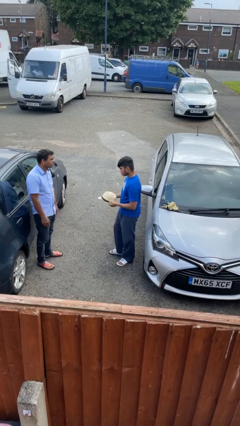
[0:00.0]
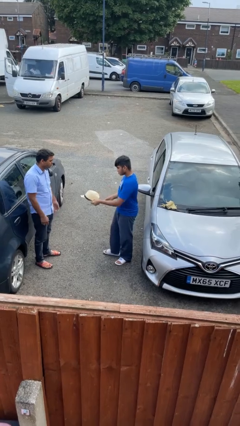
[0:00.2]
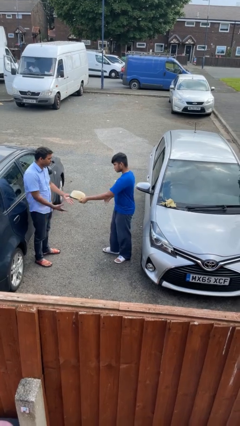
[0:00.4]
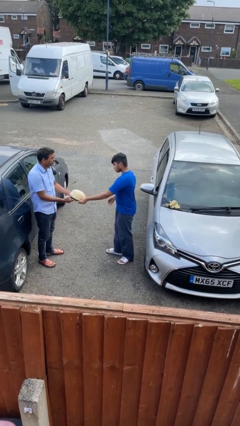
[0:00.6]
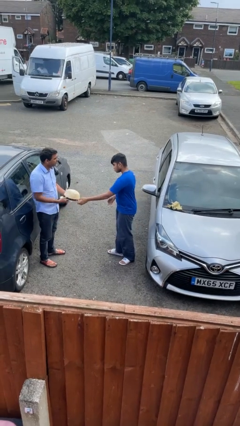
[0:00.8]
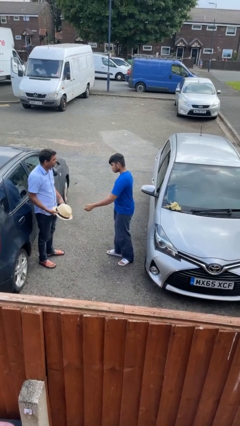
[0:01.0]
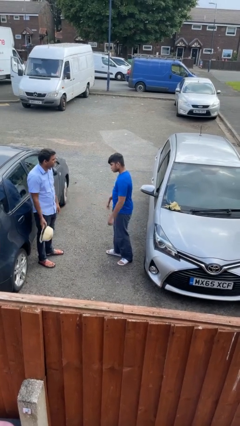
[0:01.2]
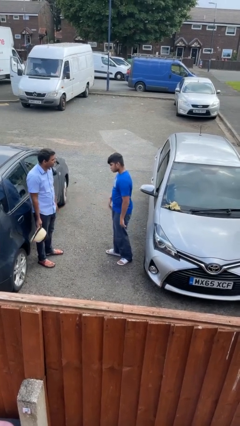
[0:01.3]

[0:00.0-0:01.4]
person transfers object to person

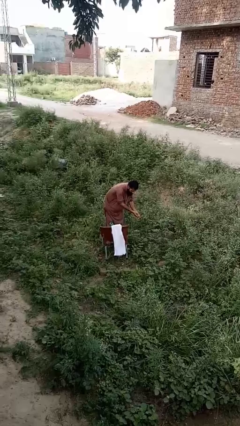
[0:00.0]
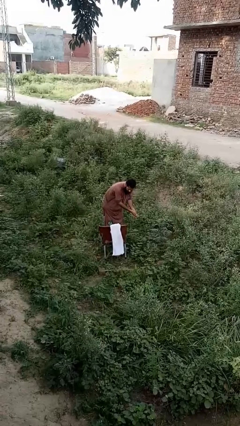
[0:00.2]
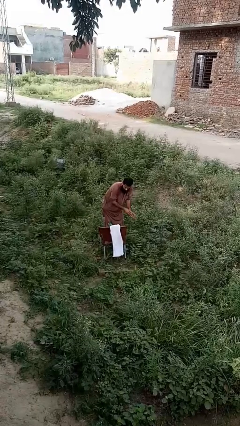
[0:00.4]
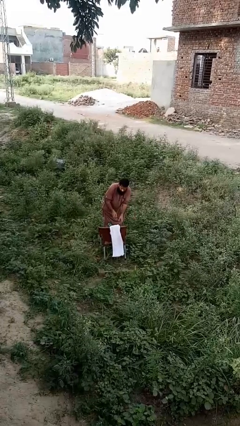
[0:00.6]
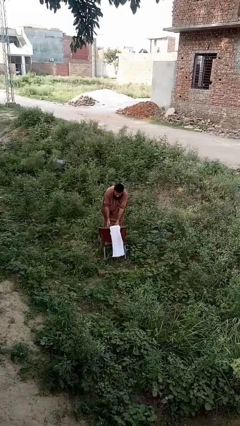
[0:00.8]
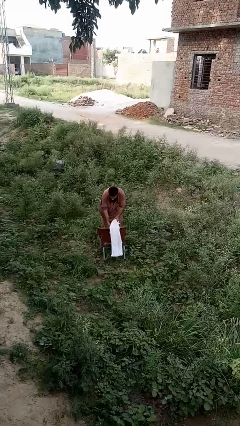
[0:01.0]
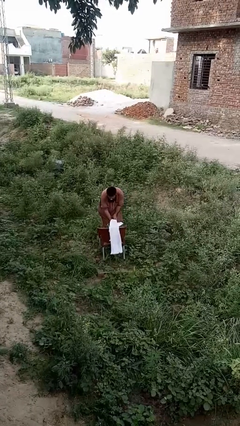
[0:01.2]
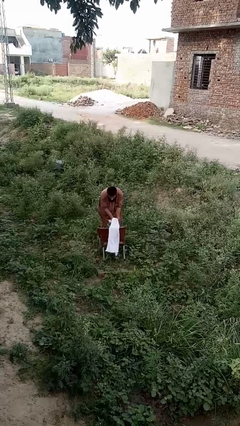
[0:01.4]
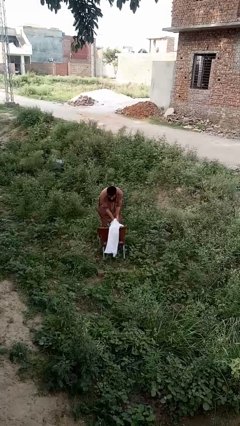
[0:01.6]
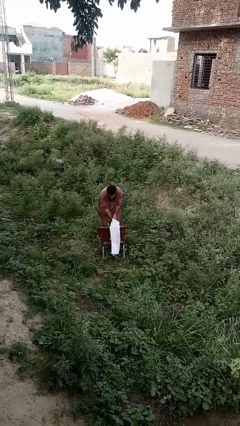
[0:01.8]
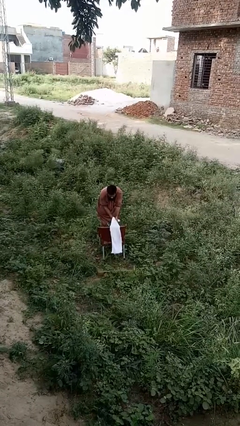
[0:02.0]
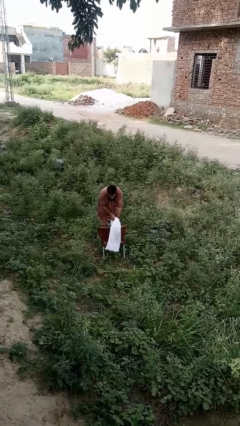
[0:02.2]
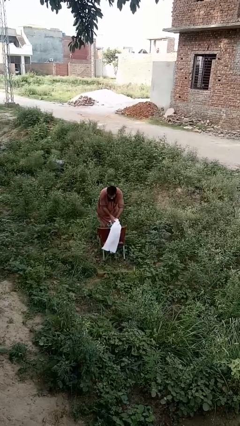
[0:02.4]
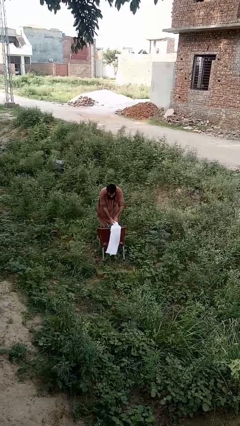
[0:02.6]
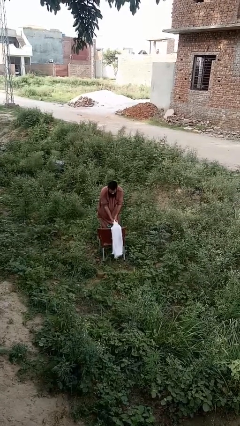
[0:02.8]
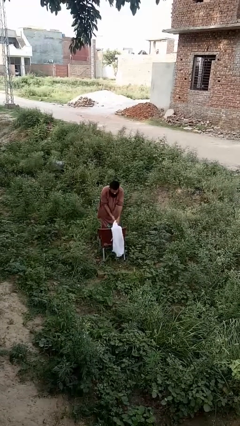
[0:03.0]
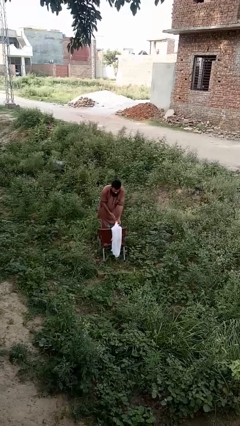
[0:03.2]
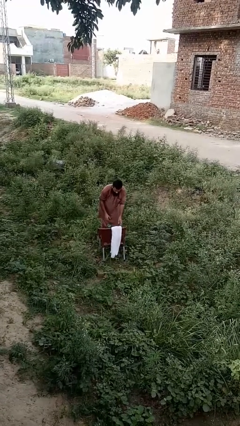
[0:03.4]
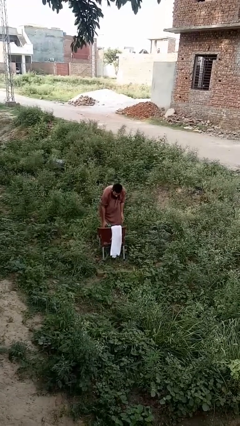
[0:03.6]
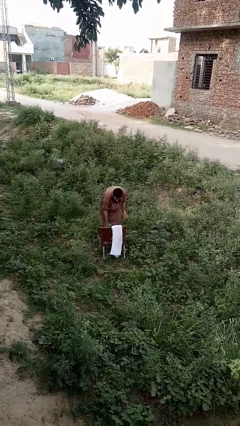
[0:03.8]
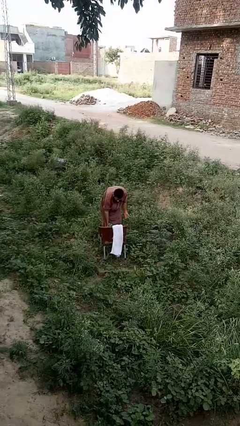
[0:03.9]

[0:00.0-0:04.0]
person dries hands with towel

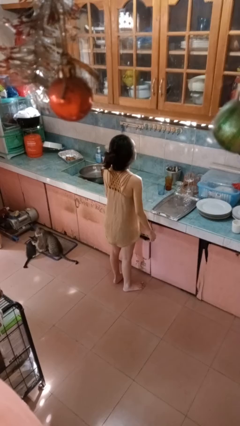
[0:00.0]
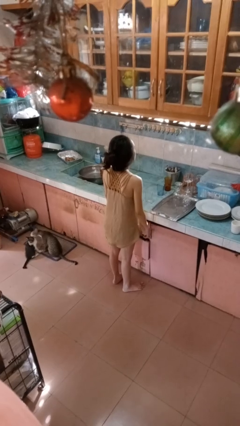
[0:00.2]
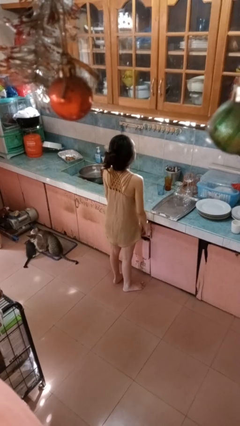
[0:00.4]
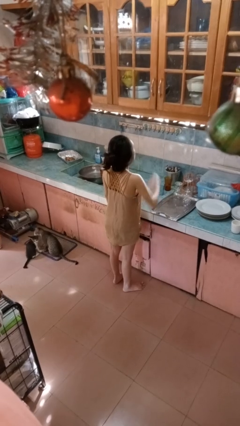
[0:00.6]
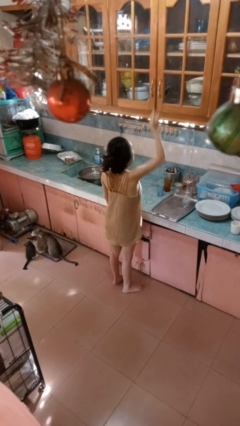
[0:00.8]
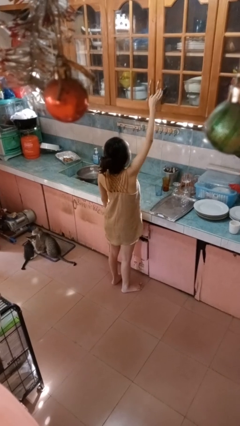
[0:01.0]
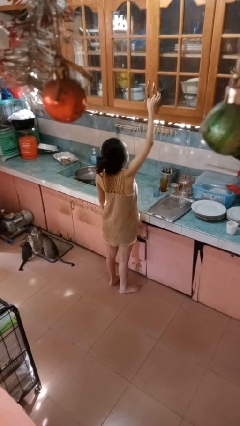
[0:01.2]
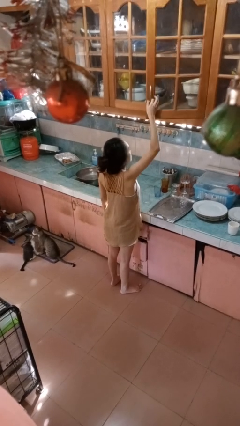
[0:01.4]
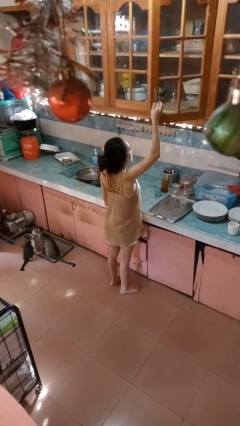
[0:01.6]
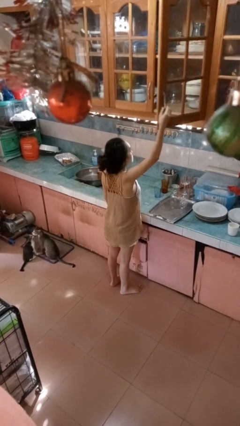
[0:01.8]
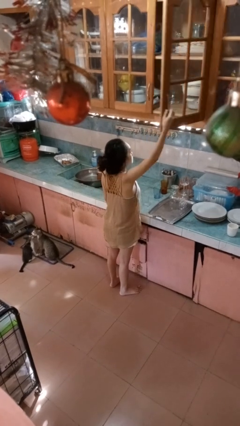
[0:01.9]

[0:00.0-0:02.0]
person opens cabinet

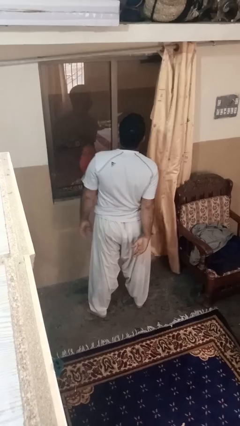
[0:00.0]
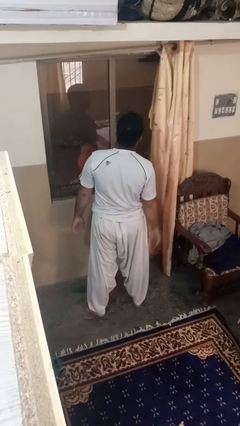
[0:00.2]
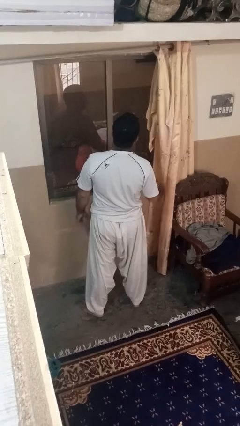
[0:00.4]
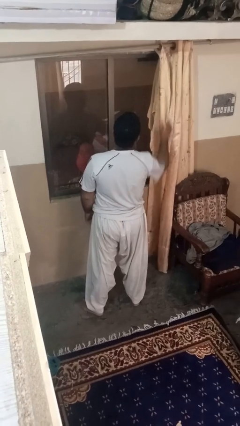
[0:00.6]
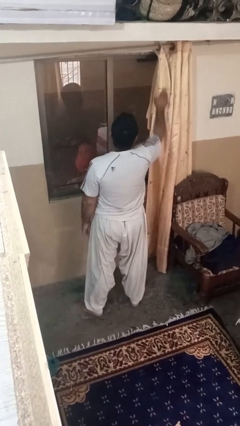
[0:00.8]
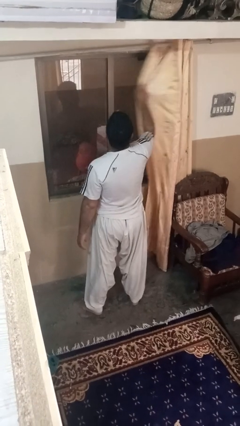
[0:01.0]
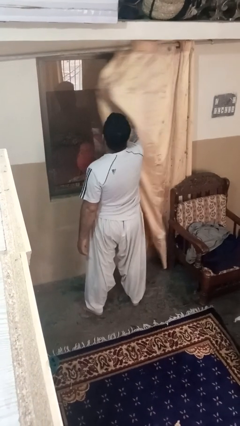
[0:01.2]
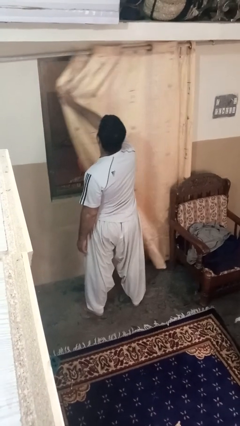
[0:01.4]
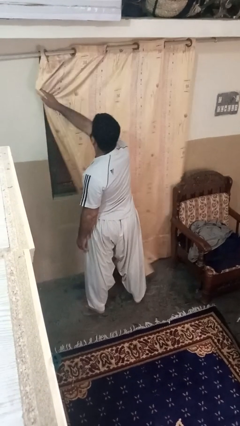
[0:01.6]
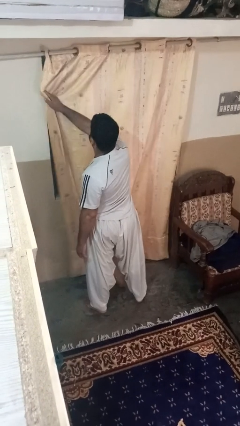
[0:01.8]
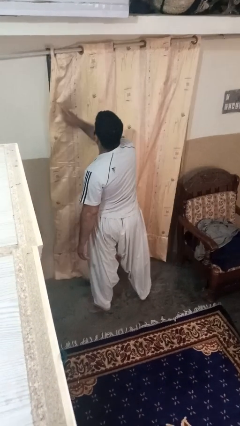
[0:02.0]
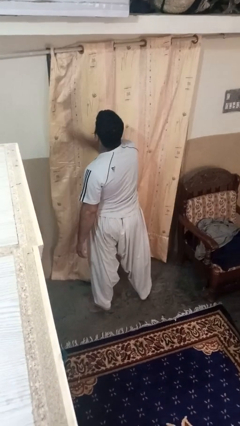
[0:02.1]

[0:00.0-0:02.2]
person closes curtains

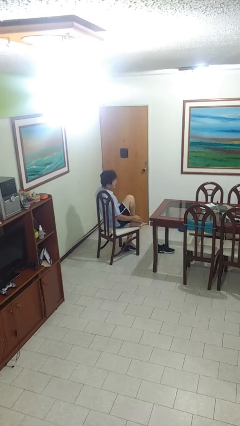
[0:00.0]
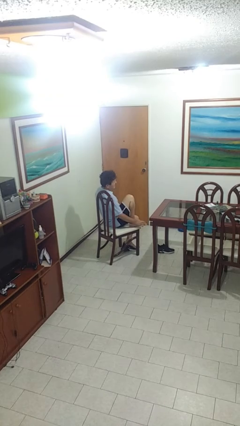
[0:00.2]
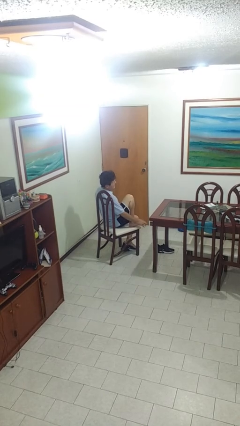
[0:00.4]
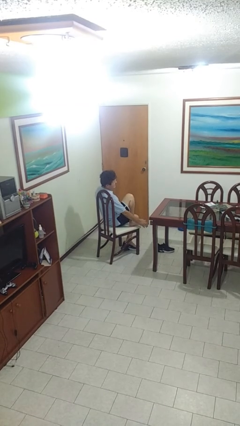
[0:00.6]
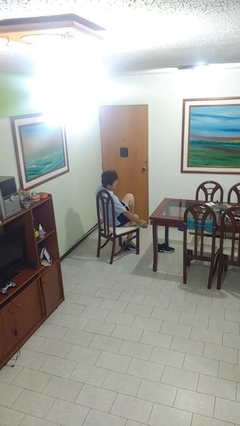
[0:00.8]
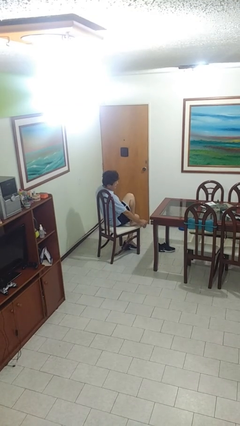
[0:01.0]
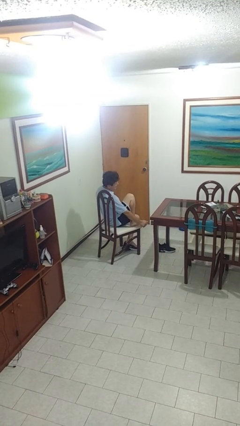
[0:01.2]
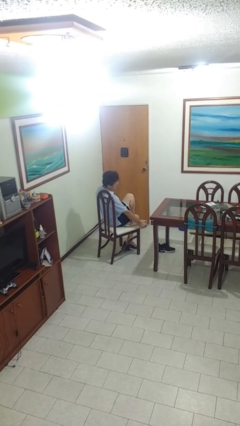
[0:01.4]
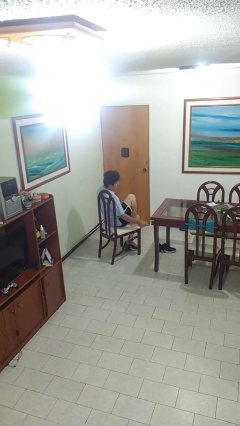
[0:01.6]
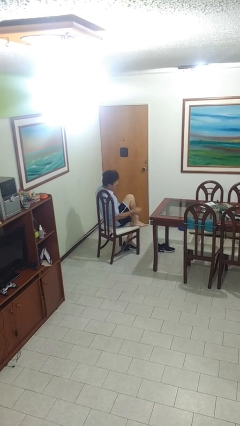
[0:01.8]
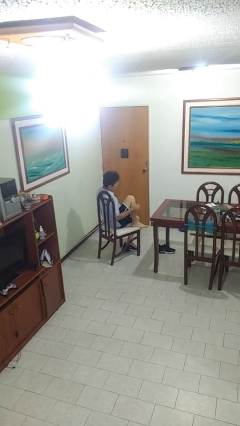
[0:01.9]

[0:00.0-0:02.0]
person rubs foot

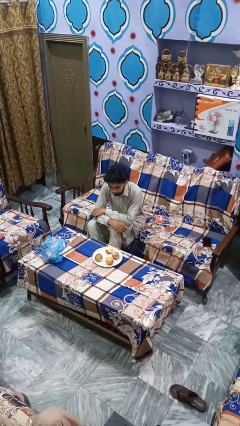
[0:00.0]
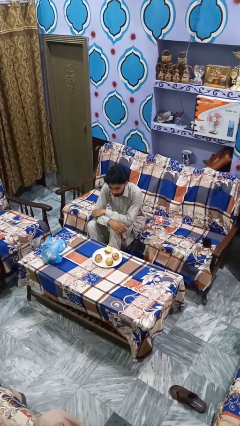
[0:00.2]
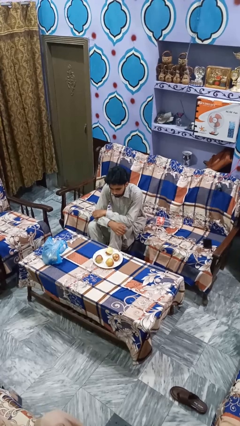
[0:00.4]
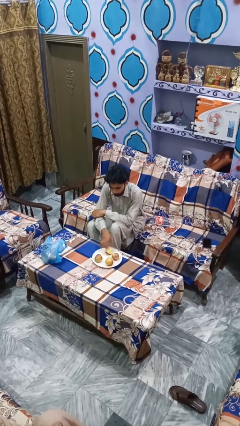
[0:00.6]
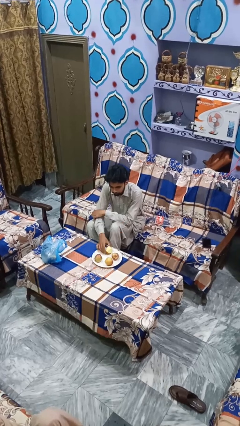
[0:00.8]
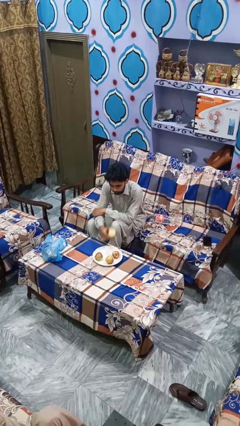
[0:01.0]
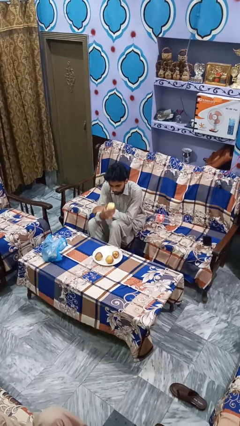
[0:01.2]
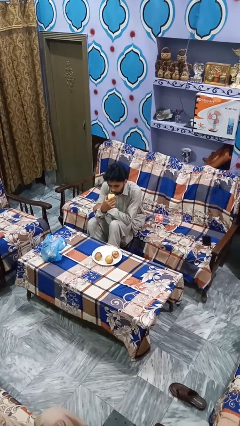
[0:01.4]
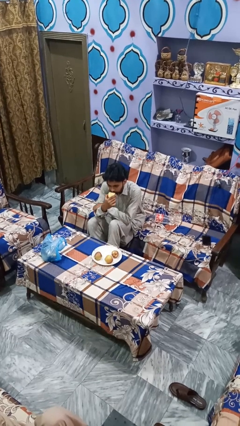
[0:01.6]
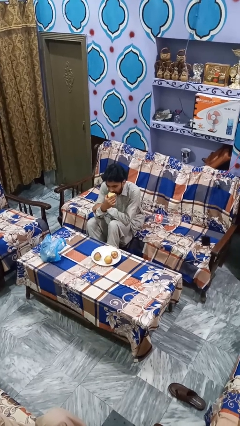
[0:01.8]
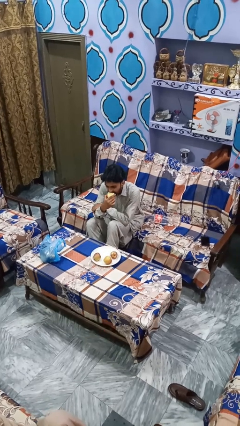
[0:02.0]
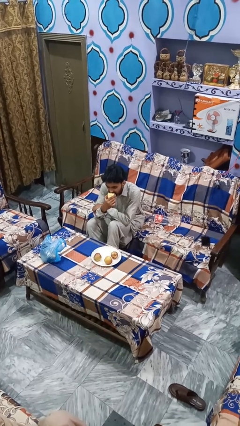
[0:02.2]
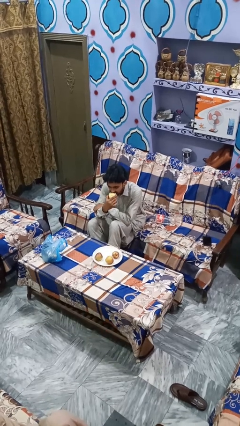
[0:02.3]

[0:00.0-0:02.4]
person eats apple

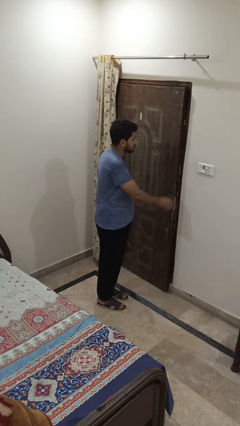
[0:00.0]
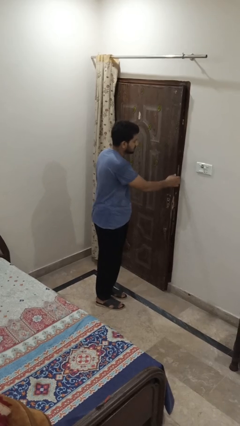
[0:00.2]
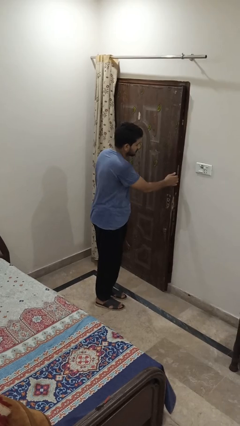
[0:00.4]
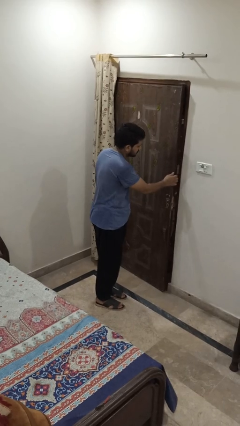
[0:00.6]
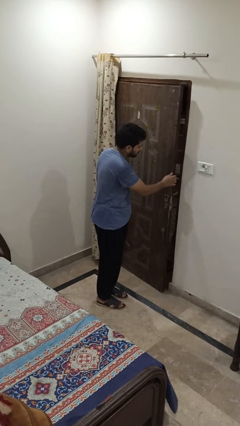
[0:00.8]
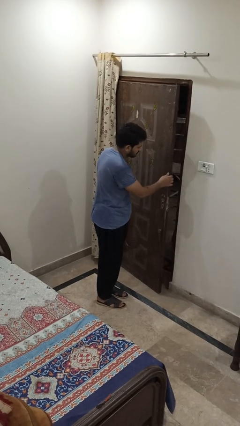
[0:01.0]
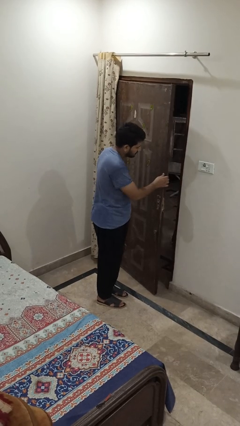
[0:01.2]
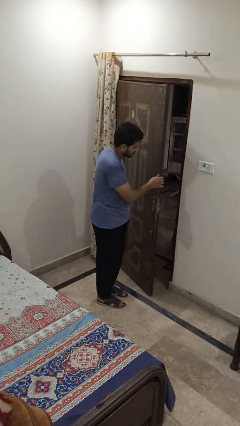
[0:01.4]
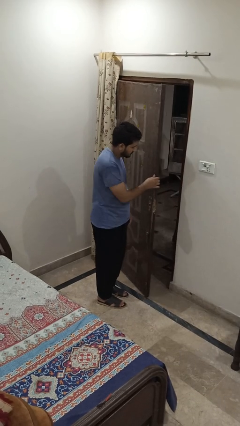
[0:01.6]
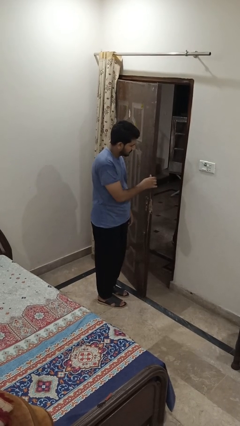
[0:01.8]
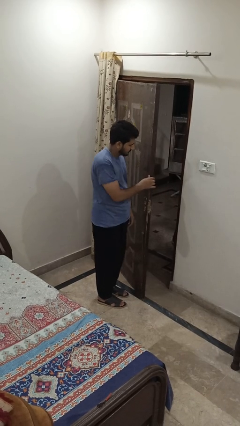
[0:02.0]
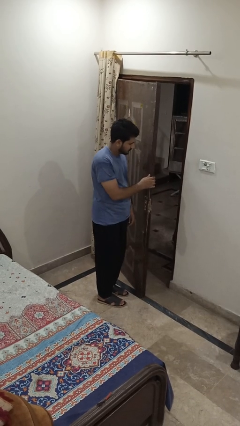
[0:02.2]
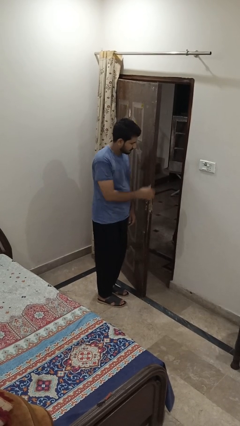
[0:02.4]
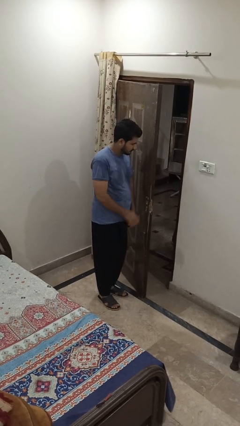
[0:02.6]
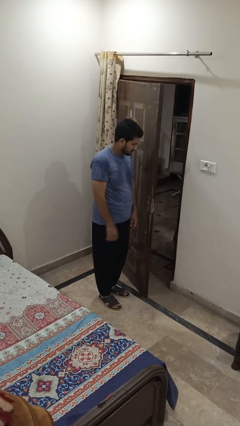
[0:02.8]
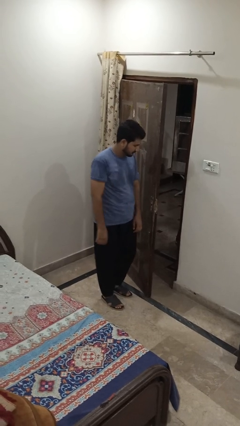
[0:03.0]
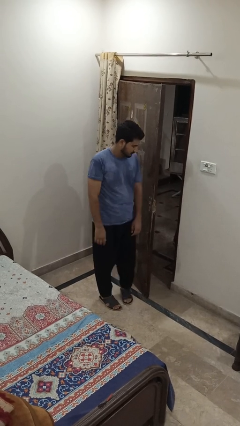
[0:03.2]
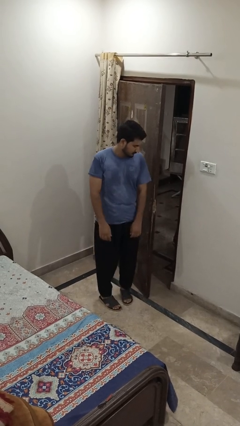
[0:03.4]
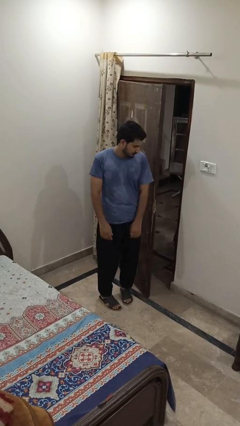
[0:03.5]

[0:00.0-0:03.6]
person opens facility door
